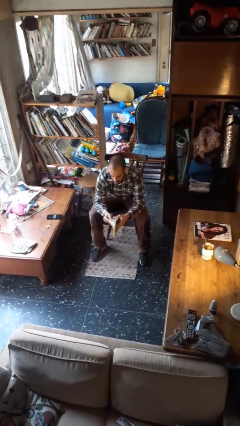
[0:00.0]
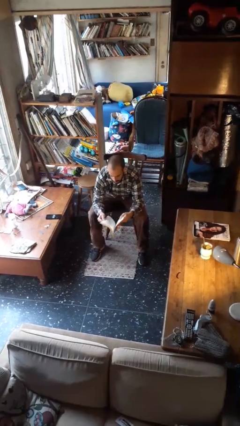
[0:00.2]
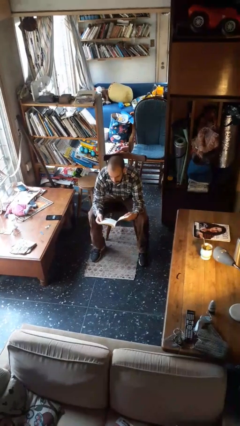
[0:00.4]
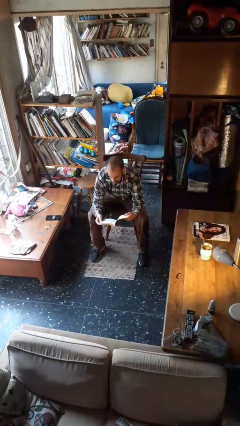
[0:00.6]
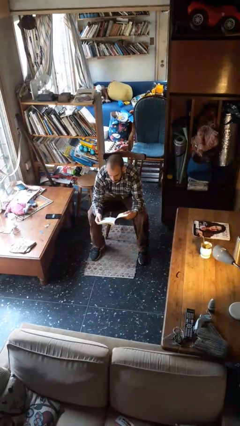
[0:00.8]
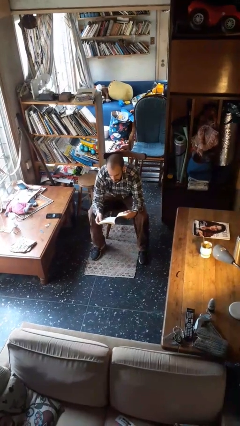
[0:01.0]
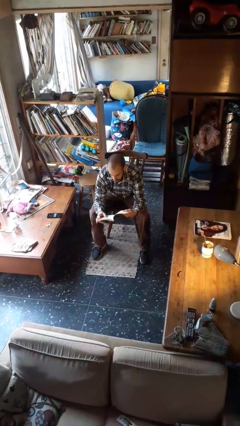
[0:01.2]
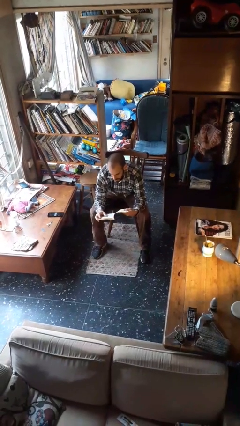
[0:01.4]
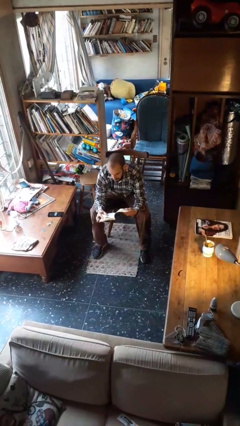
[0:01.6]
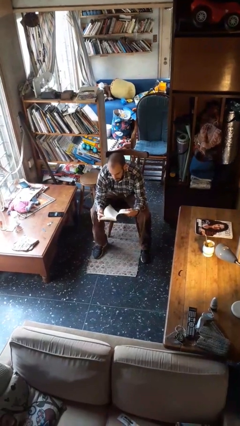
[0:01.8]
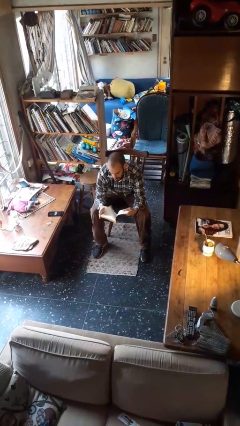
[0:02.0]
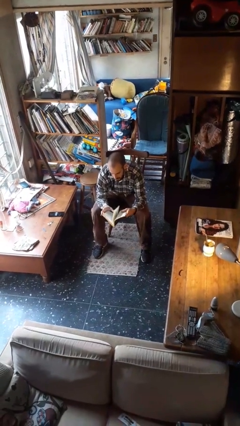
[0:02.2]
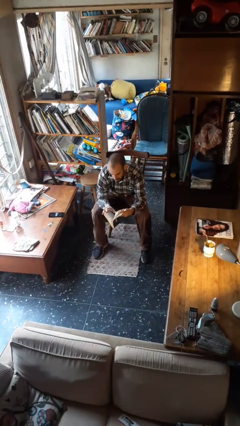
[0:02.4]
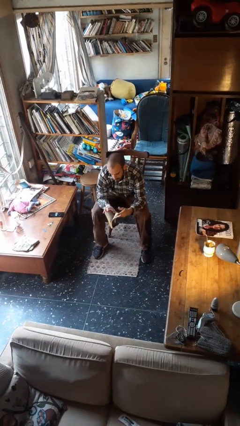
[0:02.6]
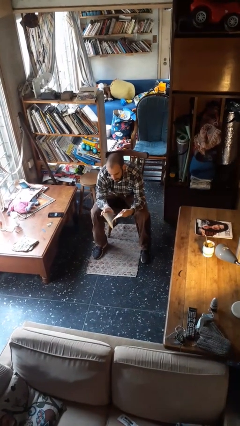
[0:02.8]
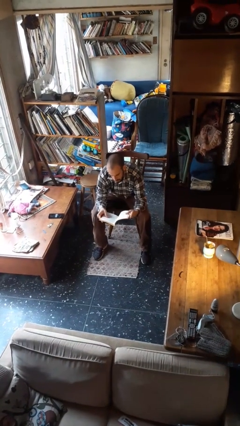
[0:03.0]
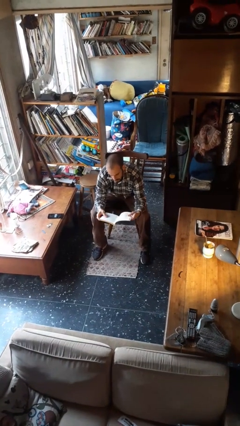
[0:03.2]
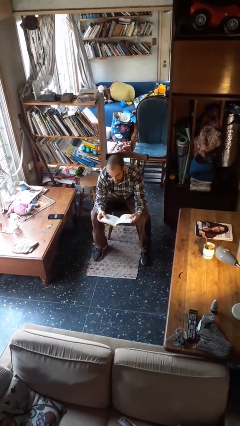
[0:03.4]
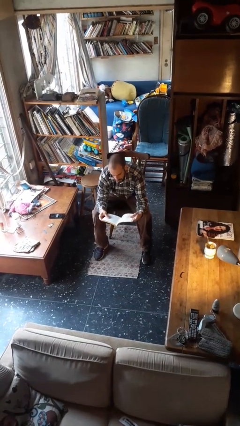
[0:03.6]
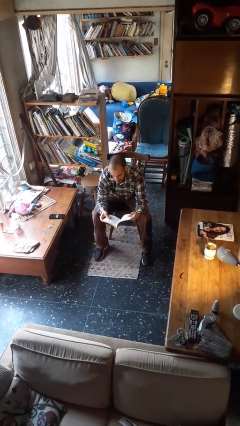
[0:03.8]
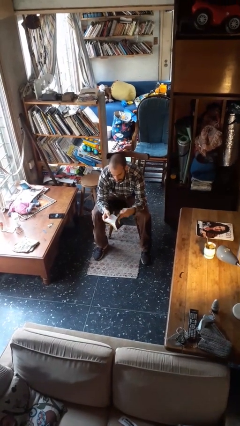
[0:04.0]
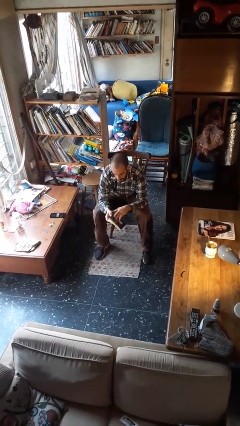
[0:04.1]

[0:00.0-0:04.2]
person reads book

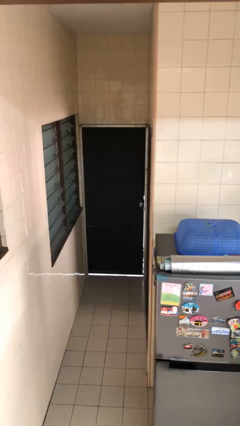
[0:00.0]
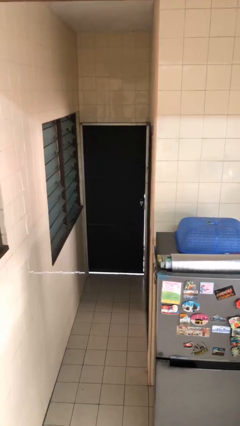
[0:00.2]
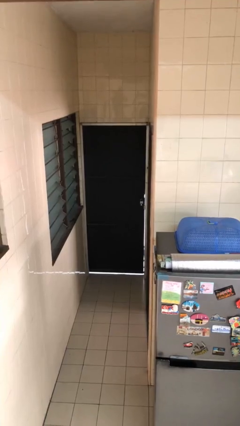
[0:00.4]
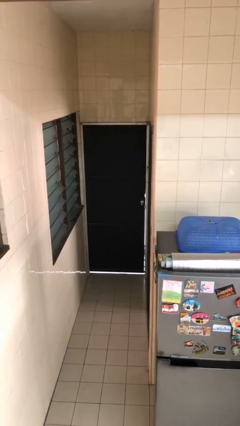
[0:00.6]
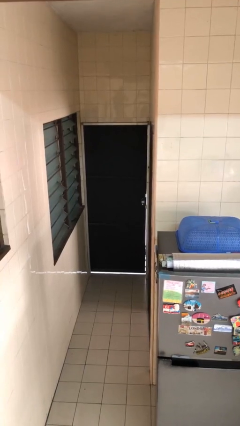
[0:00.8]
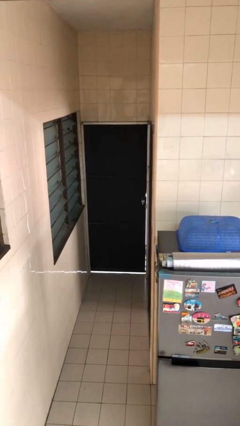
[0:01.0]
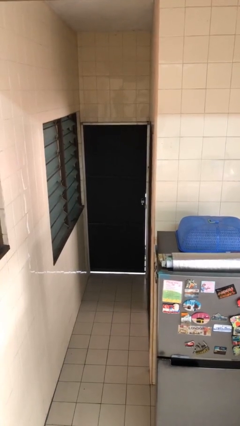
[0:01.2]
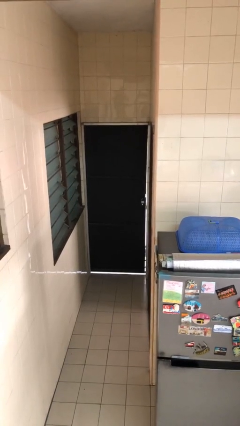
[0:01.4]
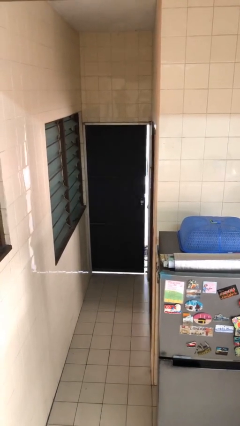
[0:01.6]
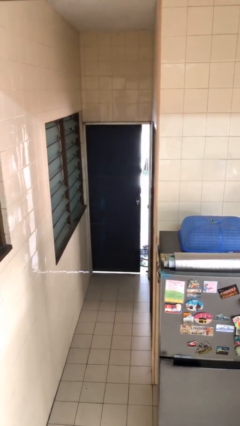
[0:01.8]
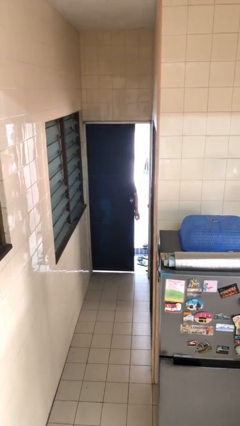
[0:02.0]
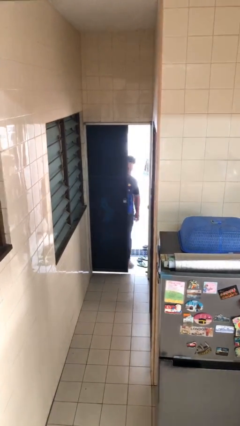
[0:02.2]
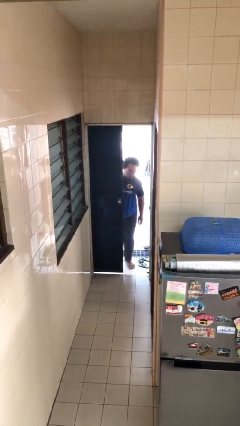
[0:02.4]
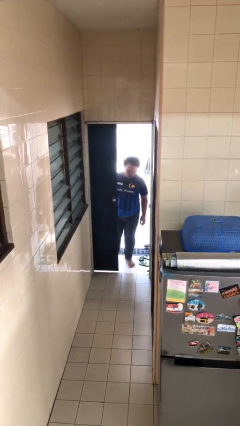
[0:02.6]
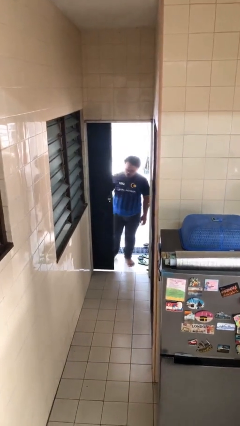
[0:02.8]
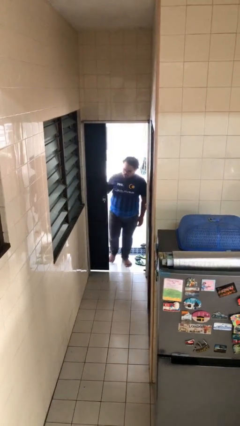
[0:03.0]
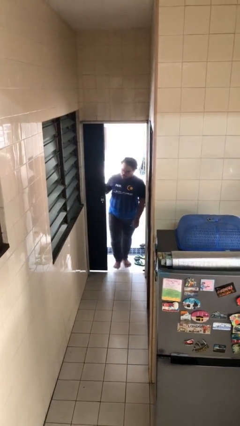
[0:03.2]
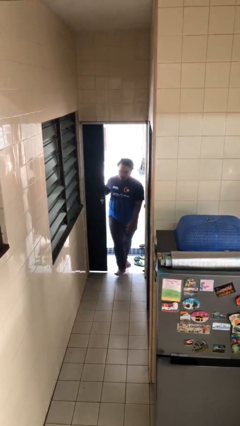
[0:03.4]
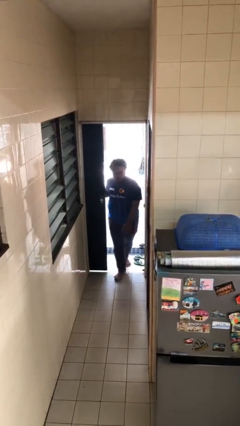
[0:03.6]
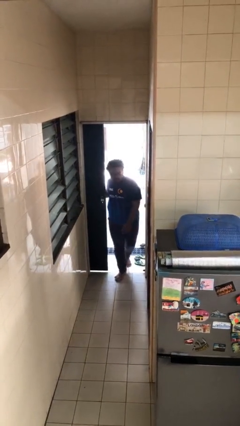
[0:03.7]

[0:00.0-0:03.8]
person opens facility door

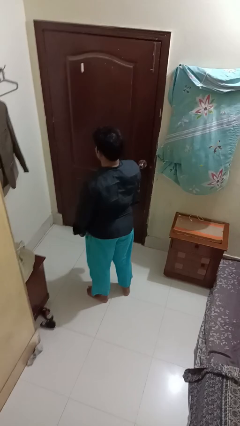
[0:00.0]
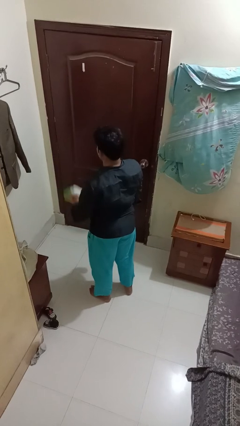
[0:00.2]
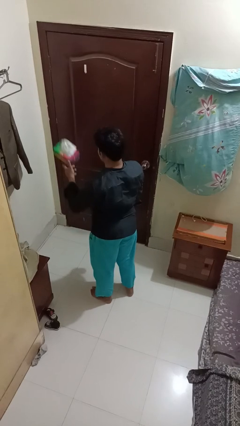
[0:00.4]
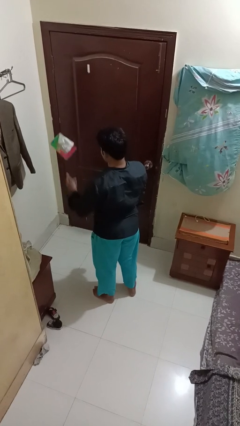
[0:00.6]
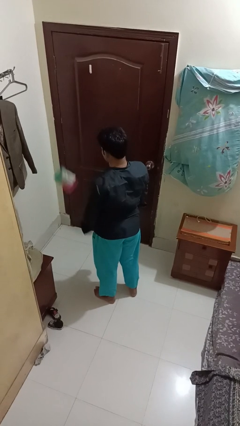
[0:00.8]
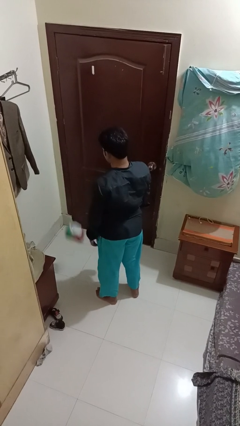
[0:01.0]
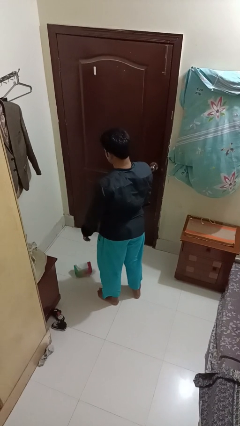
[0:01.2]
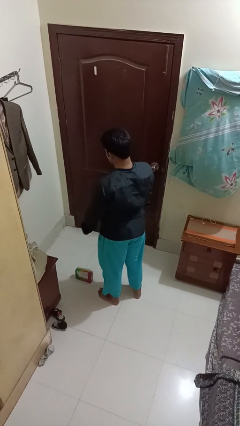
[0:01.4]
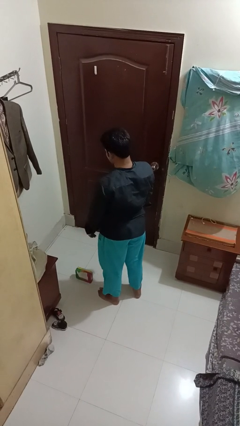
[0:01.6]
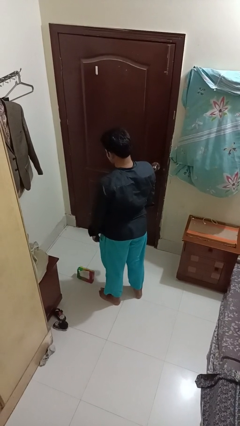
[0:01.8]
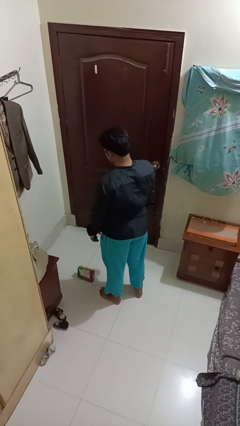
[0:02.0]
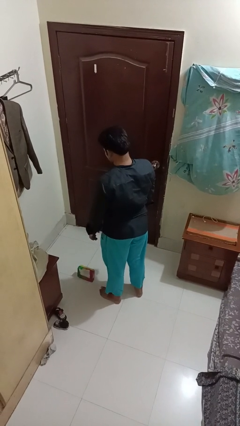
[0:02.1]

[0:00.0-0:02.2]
person throws object into air

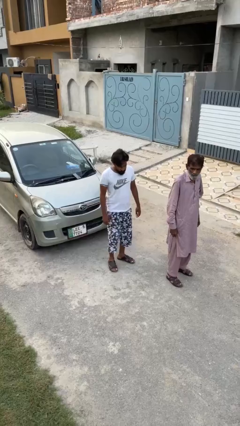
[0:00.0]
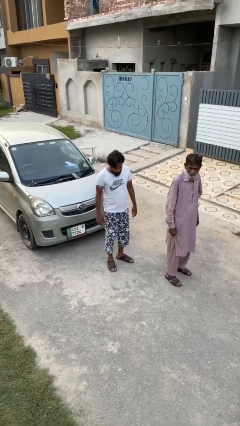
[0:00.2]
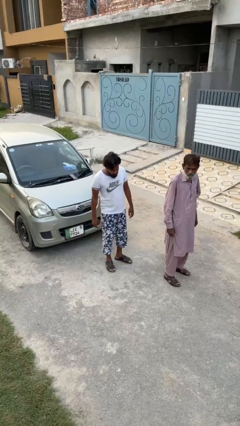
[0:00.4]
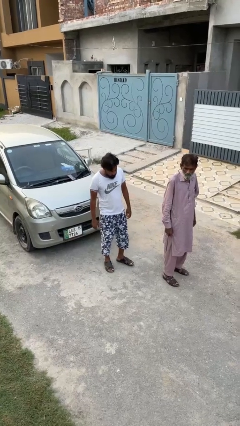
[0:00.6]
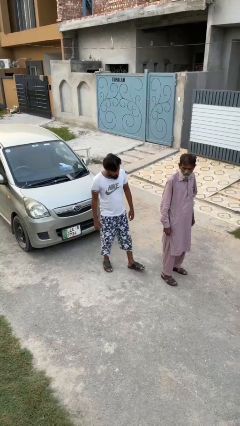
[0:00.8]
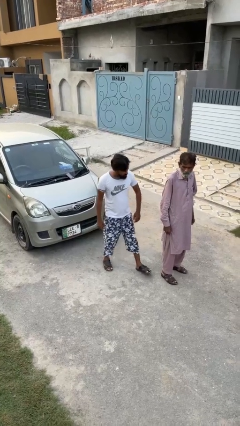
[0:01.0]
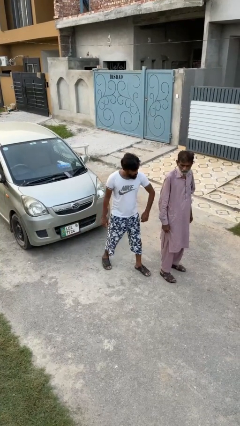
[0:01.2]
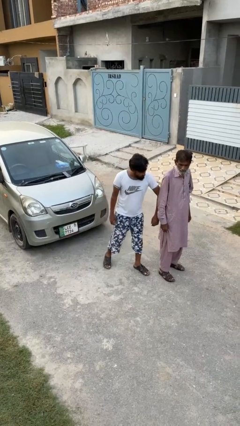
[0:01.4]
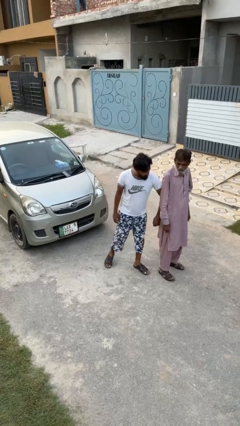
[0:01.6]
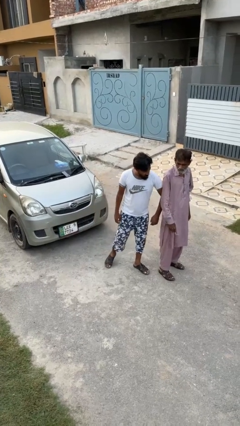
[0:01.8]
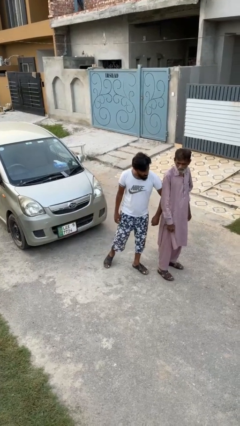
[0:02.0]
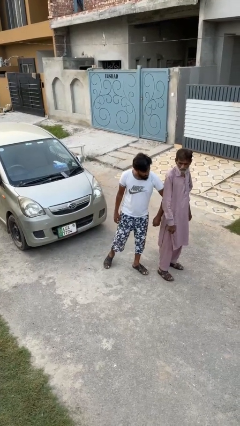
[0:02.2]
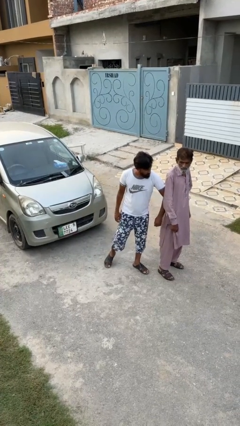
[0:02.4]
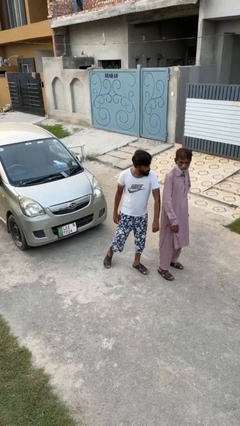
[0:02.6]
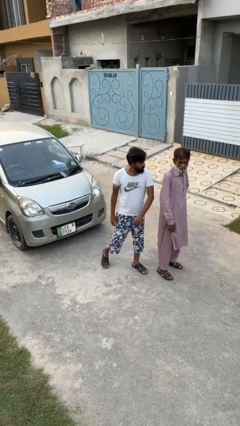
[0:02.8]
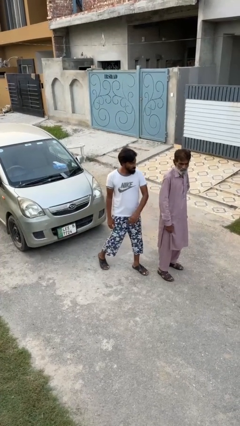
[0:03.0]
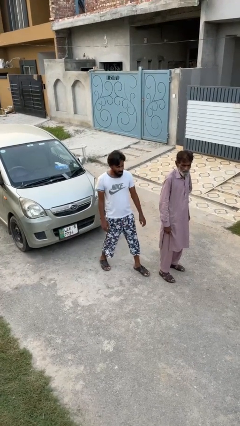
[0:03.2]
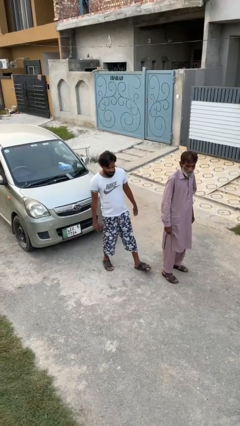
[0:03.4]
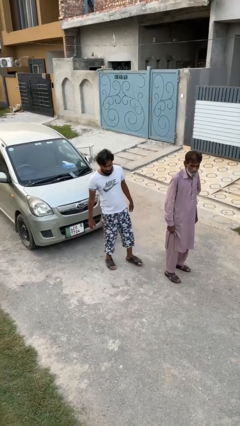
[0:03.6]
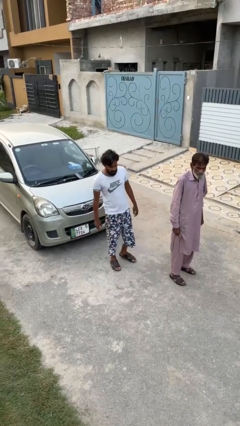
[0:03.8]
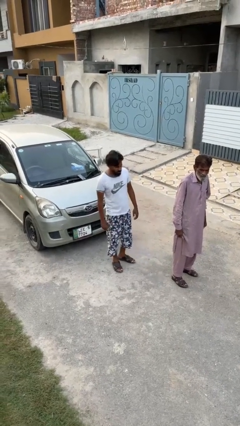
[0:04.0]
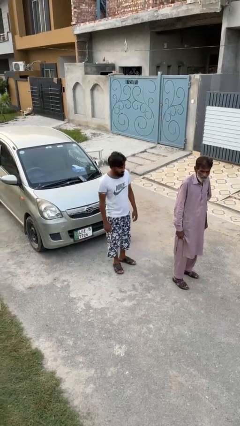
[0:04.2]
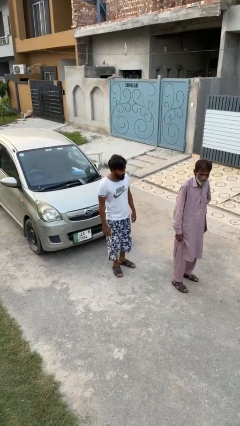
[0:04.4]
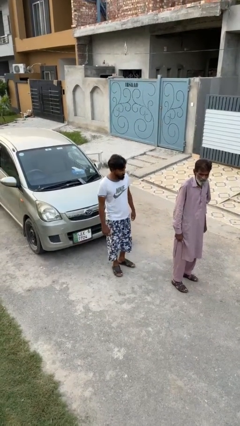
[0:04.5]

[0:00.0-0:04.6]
person nudges person with elbow

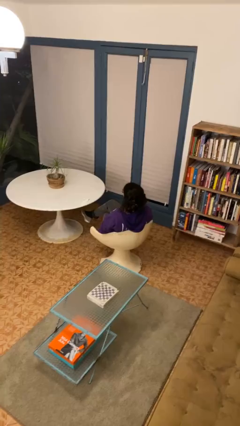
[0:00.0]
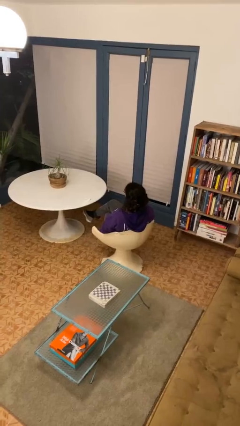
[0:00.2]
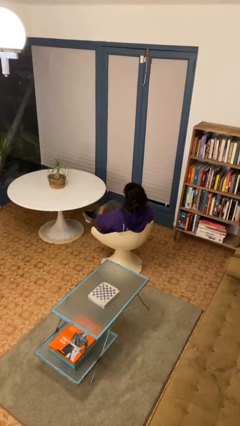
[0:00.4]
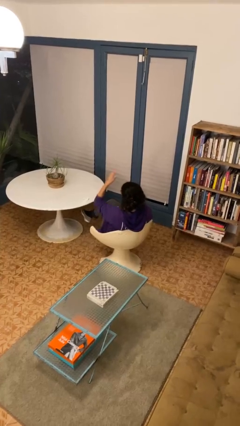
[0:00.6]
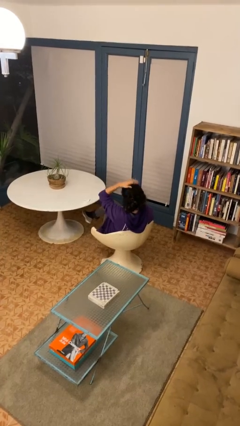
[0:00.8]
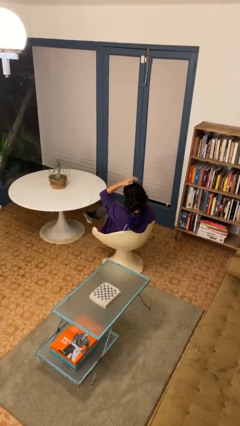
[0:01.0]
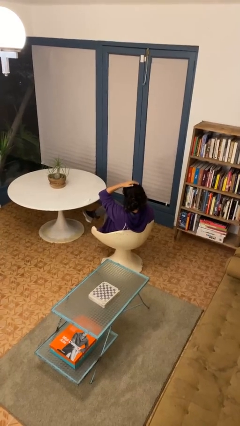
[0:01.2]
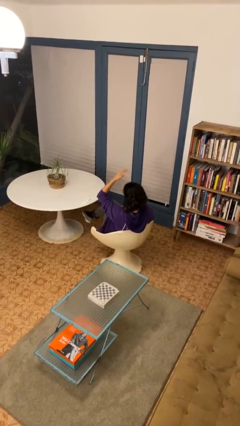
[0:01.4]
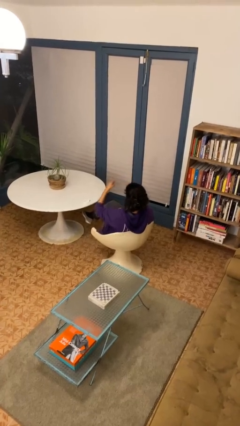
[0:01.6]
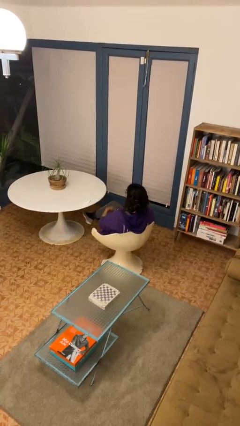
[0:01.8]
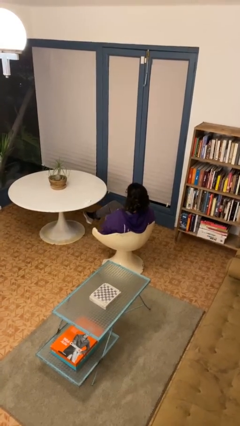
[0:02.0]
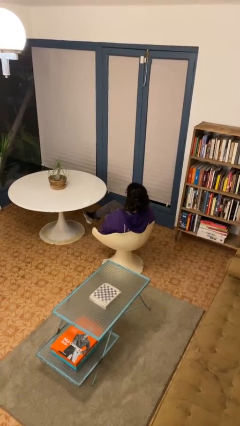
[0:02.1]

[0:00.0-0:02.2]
person pats head

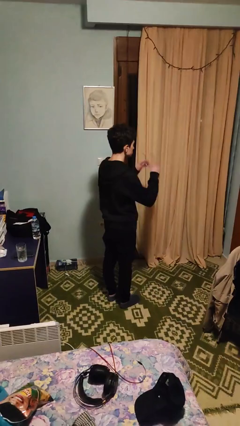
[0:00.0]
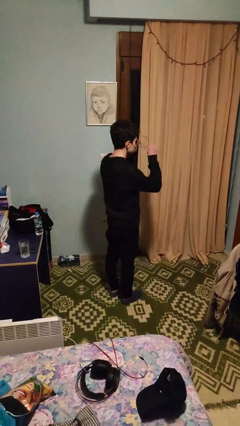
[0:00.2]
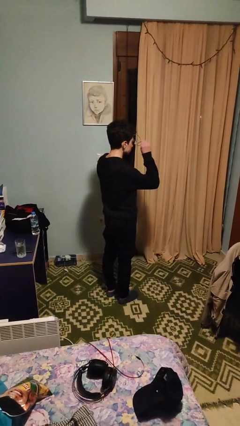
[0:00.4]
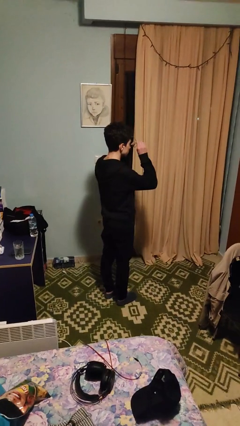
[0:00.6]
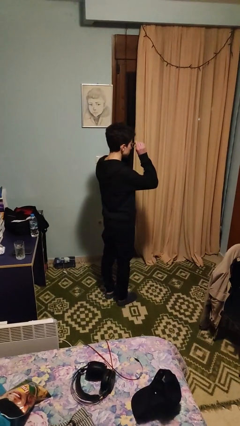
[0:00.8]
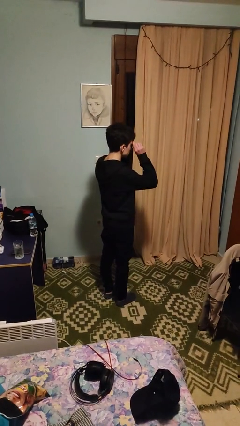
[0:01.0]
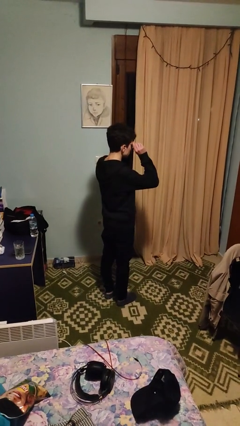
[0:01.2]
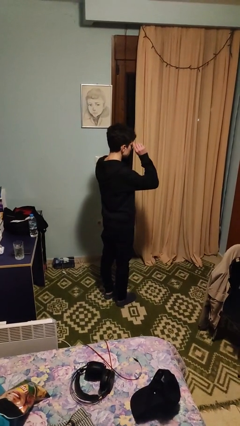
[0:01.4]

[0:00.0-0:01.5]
person puts on glasses
